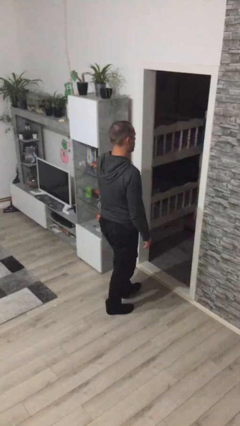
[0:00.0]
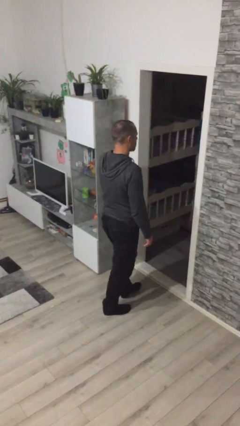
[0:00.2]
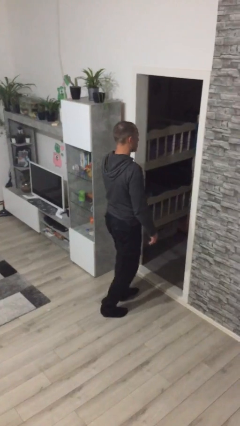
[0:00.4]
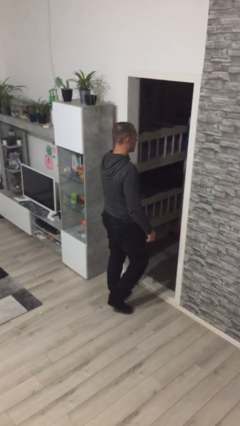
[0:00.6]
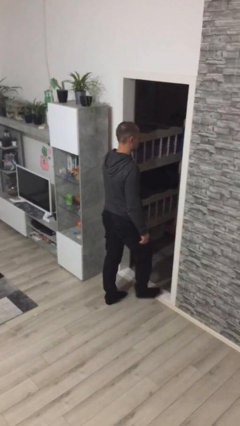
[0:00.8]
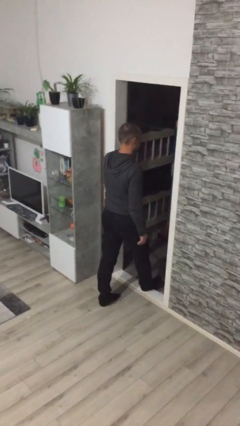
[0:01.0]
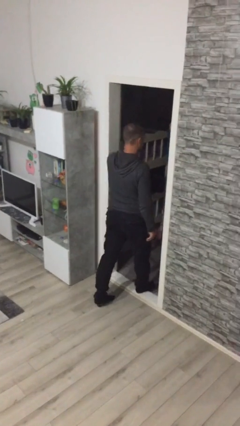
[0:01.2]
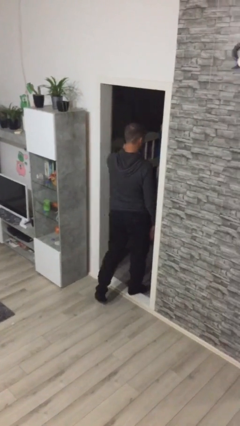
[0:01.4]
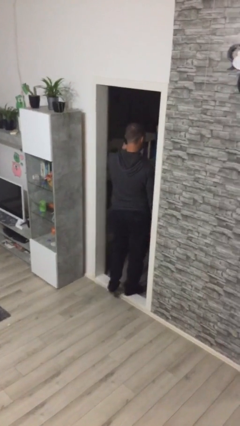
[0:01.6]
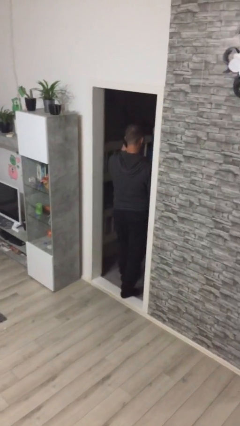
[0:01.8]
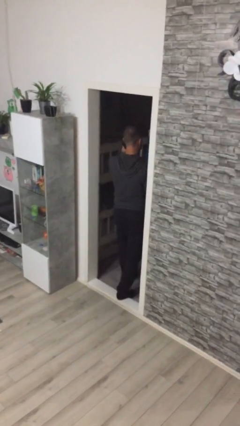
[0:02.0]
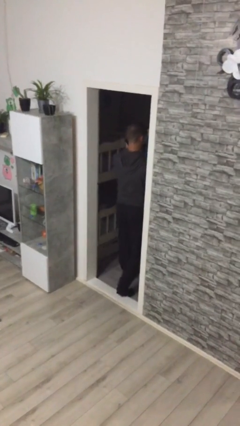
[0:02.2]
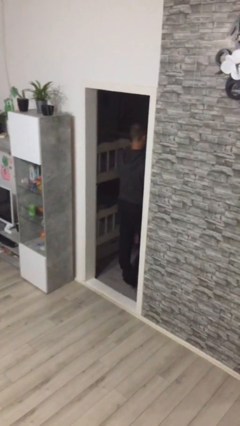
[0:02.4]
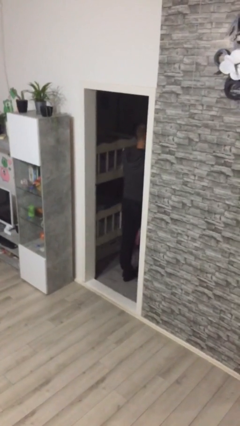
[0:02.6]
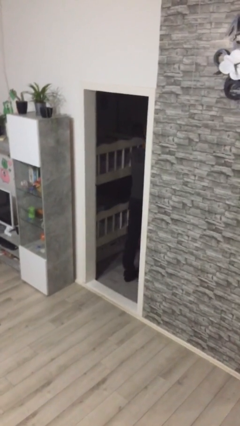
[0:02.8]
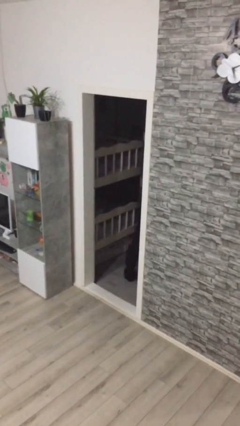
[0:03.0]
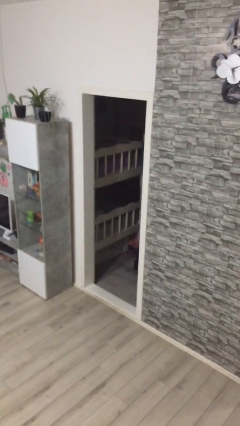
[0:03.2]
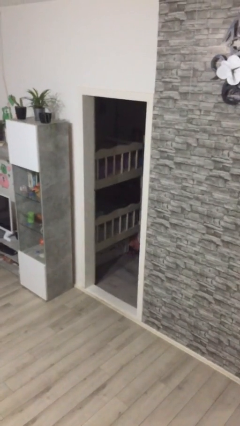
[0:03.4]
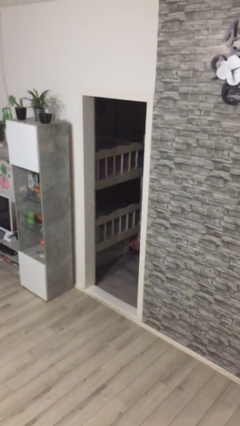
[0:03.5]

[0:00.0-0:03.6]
person exits scene through structure

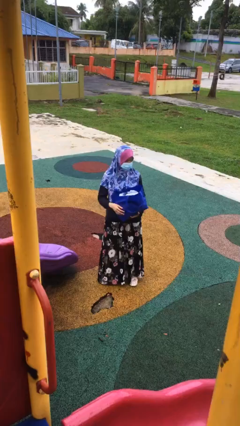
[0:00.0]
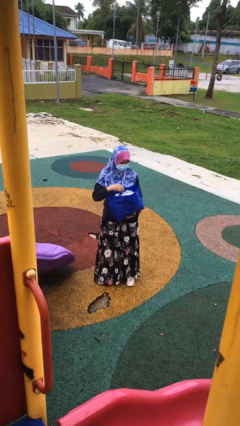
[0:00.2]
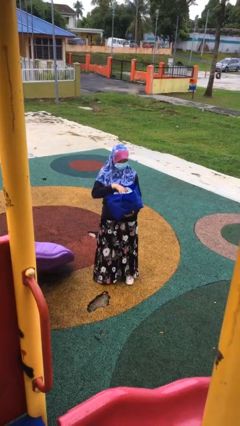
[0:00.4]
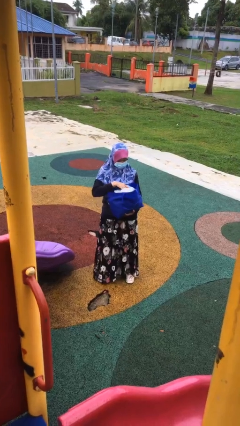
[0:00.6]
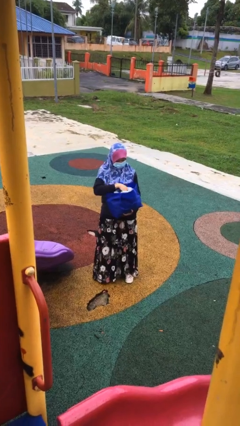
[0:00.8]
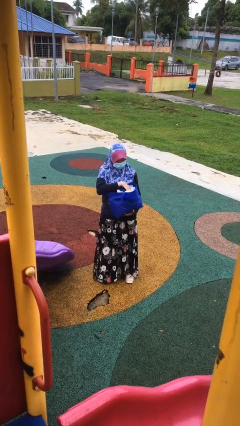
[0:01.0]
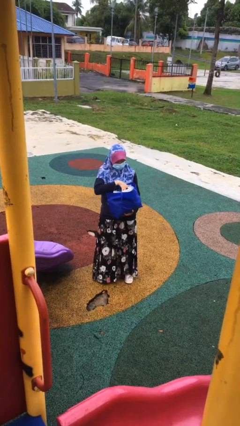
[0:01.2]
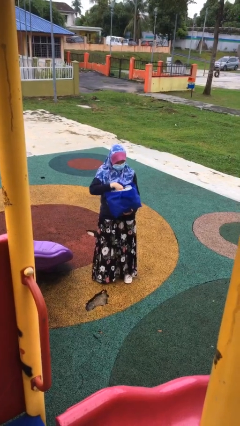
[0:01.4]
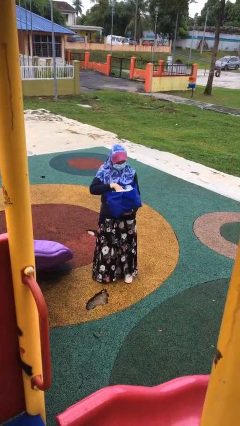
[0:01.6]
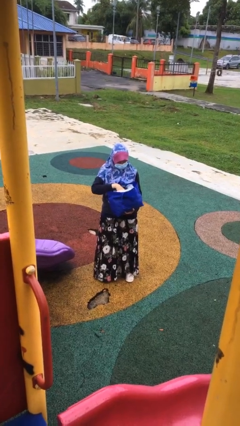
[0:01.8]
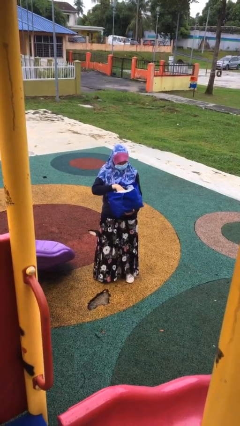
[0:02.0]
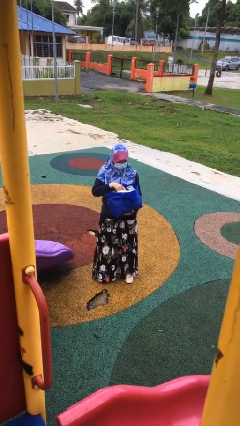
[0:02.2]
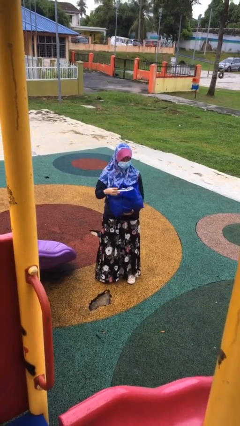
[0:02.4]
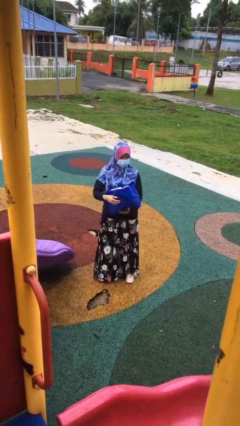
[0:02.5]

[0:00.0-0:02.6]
person searches in bag

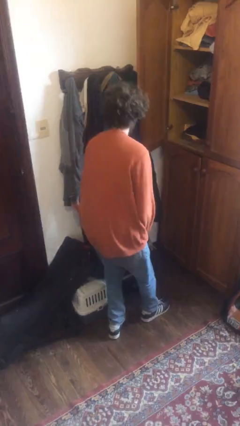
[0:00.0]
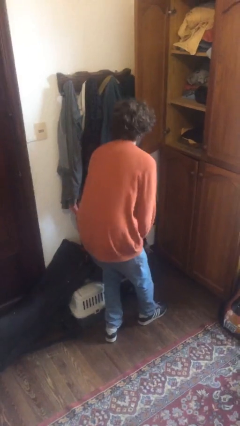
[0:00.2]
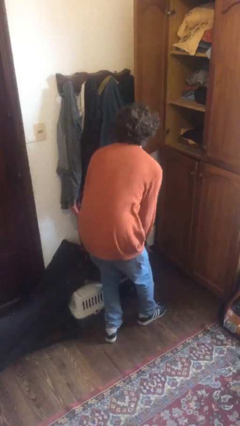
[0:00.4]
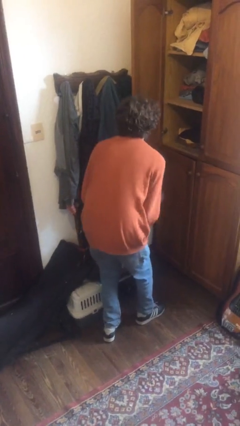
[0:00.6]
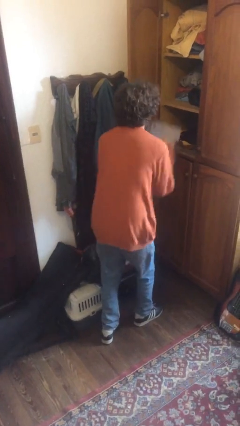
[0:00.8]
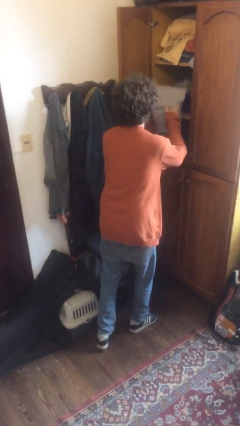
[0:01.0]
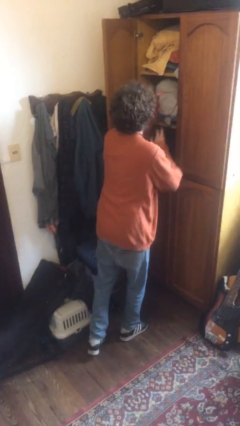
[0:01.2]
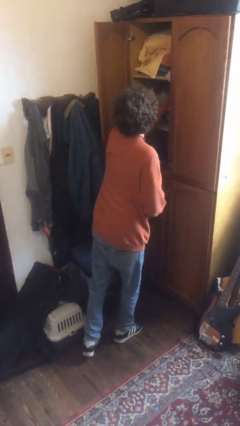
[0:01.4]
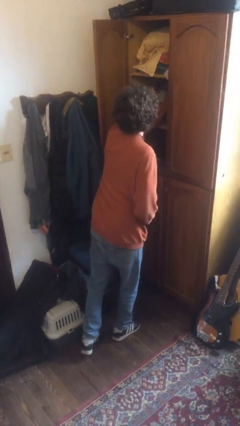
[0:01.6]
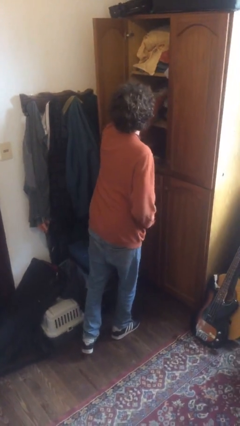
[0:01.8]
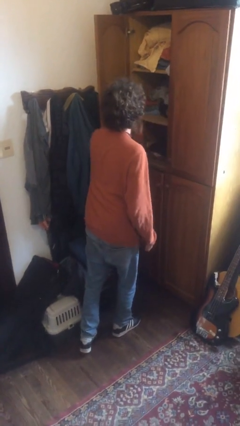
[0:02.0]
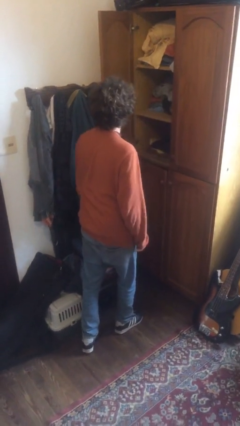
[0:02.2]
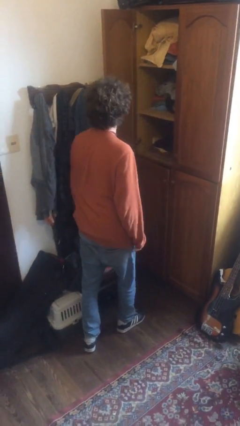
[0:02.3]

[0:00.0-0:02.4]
person puts clothes into dresser

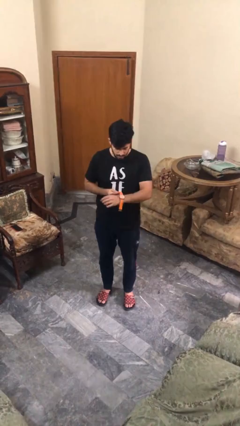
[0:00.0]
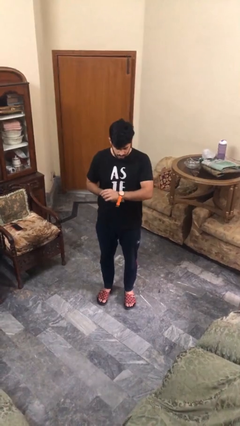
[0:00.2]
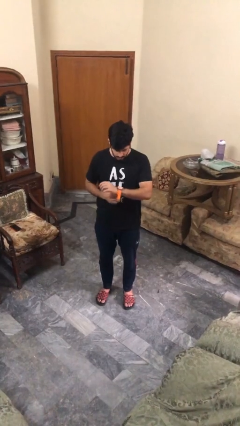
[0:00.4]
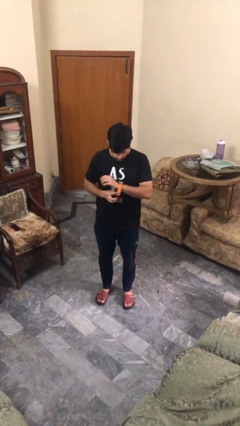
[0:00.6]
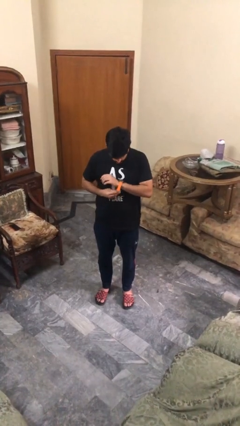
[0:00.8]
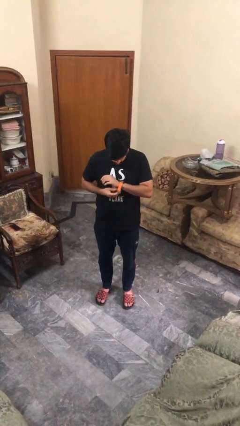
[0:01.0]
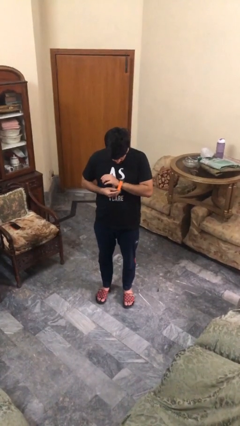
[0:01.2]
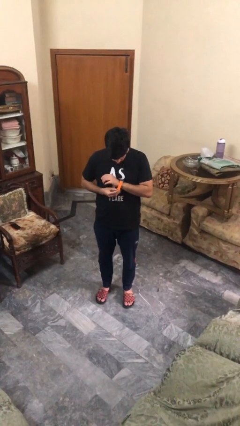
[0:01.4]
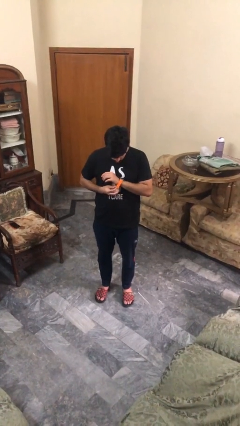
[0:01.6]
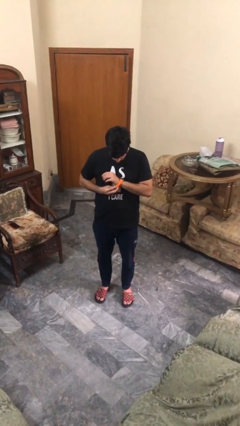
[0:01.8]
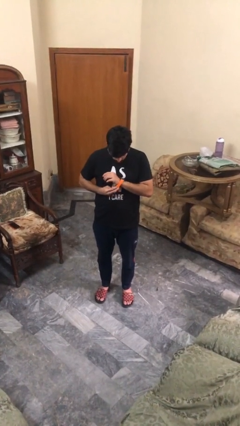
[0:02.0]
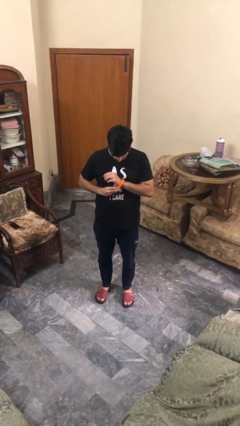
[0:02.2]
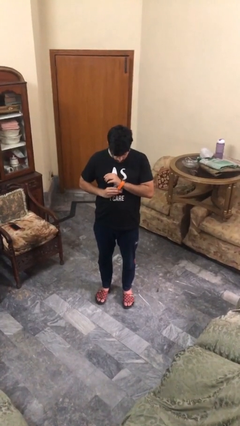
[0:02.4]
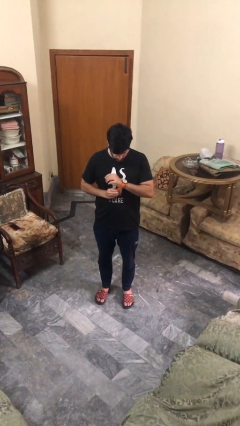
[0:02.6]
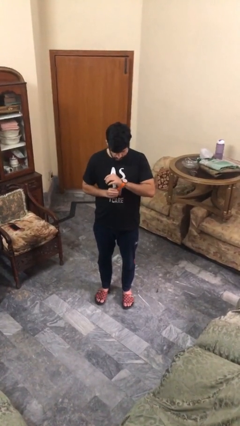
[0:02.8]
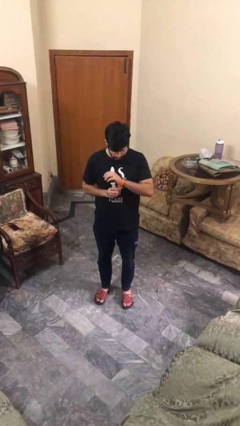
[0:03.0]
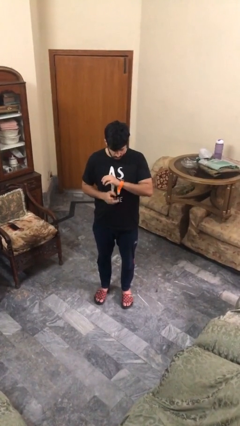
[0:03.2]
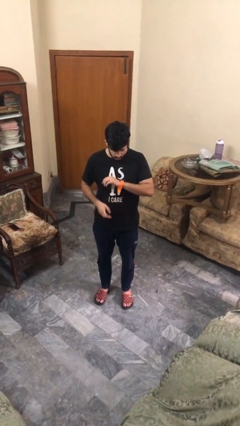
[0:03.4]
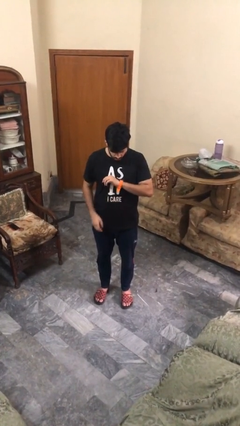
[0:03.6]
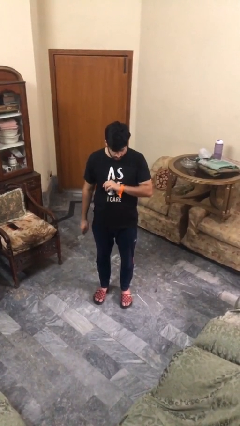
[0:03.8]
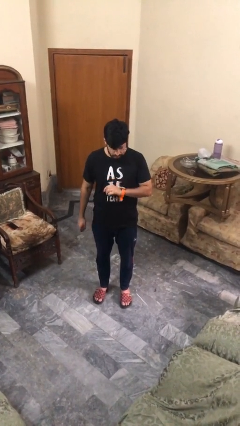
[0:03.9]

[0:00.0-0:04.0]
person puts on wristwatch

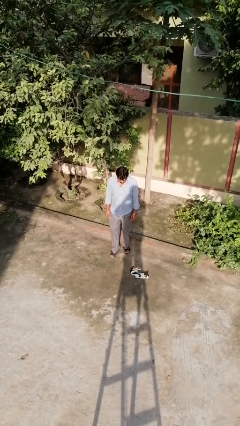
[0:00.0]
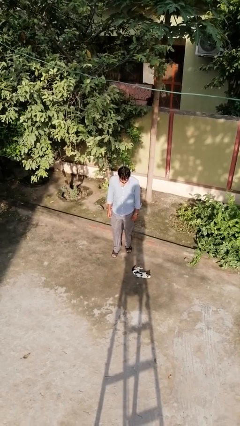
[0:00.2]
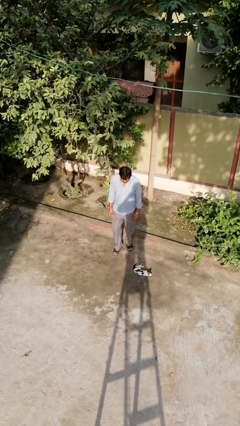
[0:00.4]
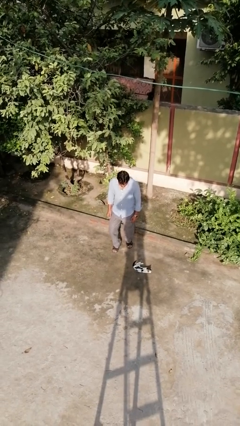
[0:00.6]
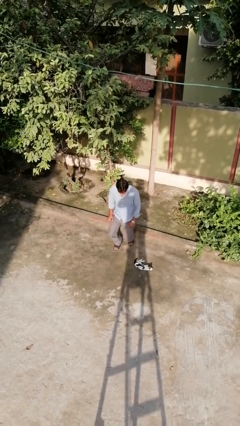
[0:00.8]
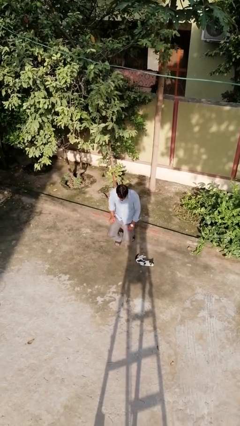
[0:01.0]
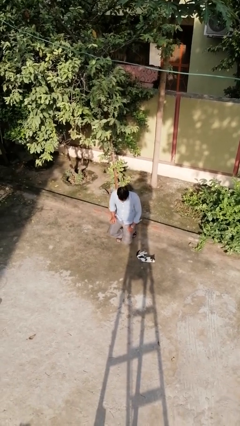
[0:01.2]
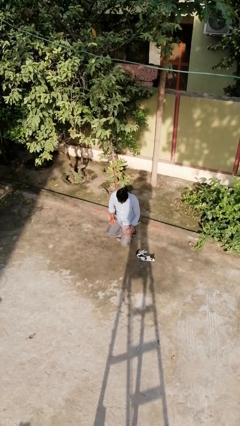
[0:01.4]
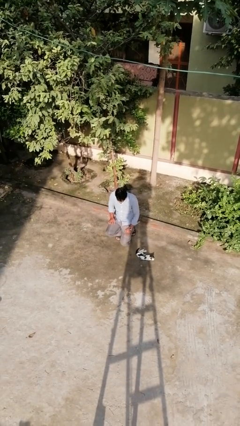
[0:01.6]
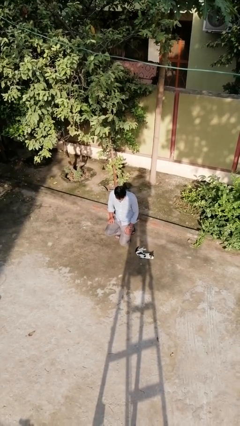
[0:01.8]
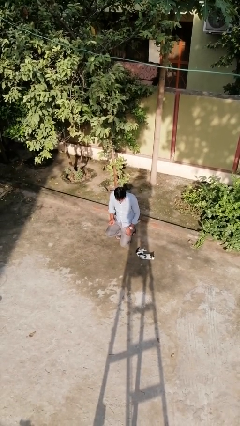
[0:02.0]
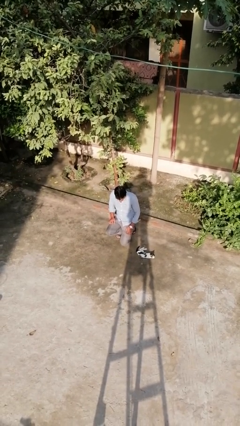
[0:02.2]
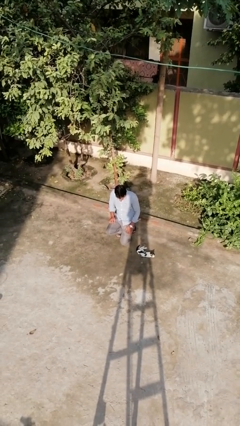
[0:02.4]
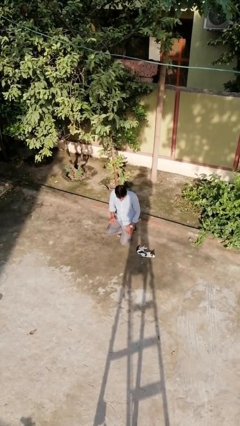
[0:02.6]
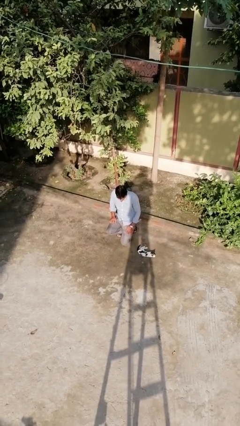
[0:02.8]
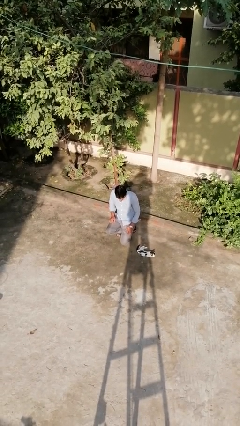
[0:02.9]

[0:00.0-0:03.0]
person kneels

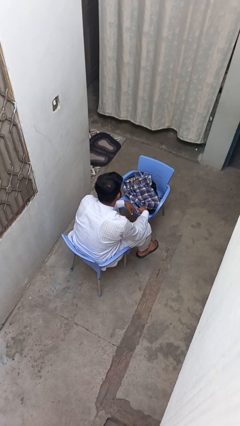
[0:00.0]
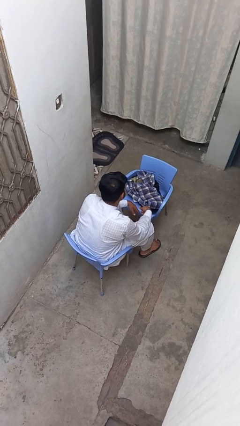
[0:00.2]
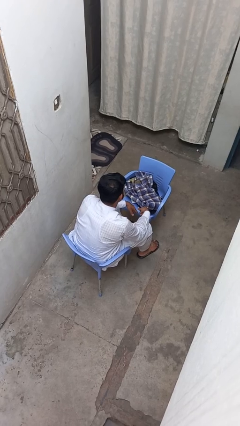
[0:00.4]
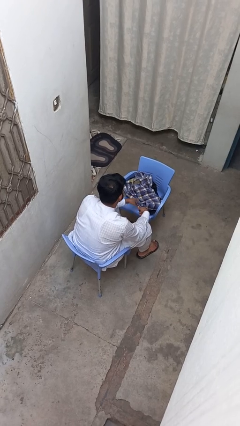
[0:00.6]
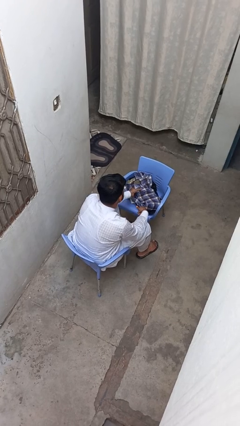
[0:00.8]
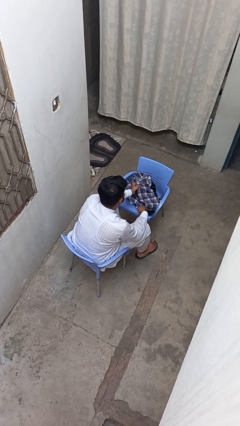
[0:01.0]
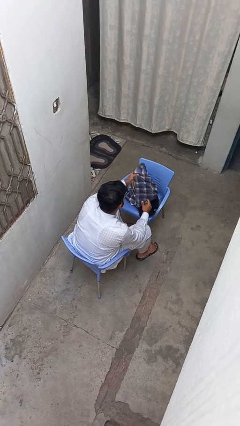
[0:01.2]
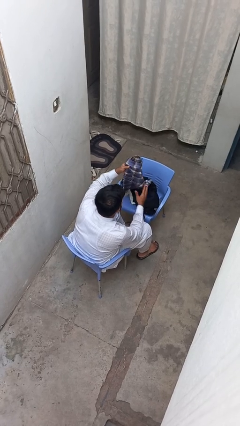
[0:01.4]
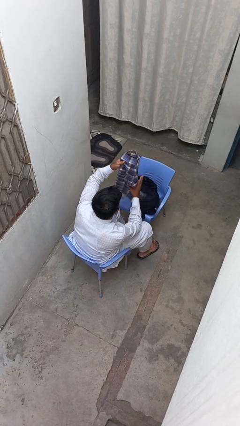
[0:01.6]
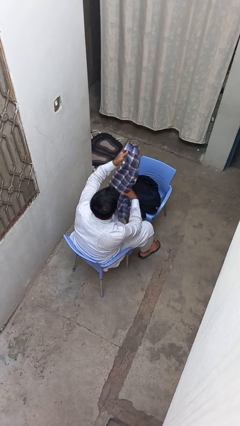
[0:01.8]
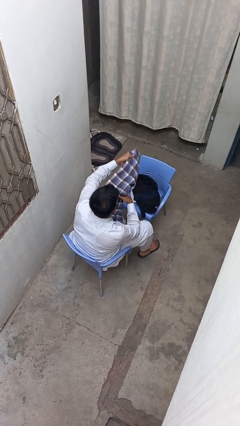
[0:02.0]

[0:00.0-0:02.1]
person folds shirt
